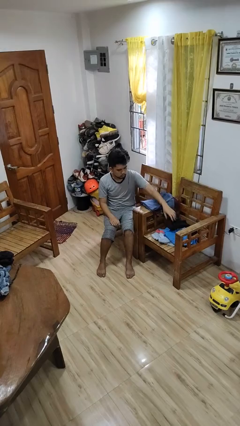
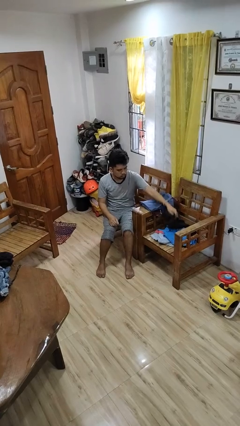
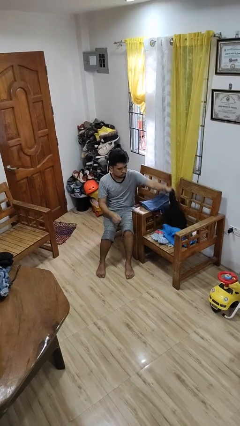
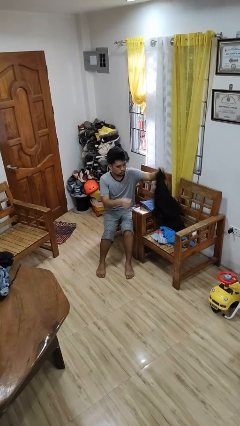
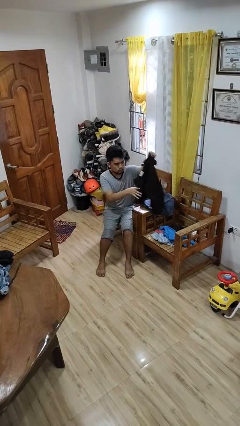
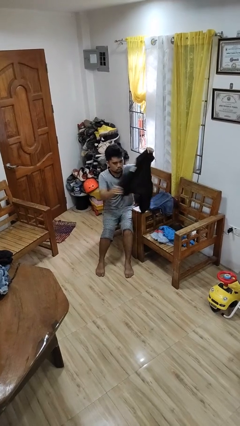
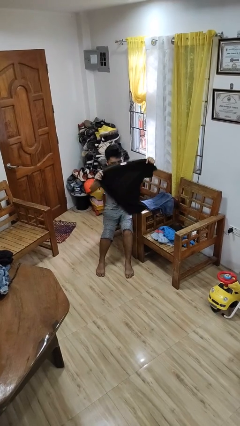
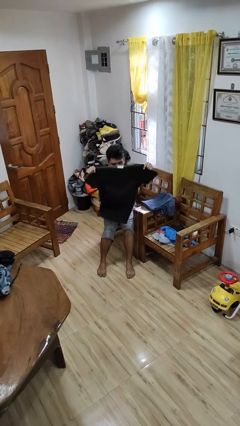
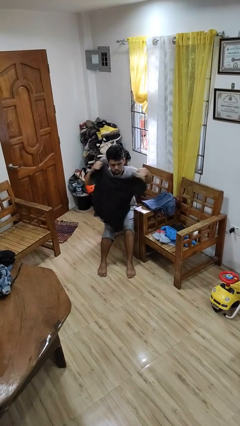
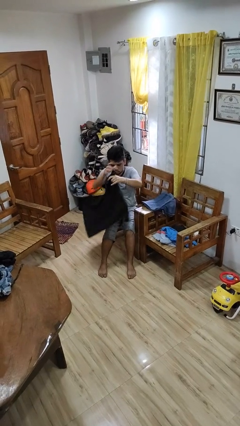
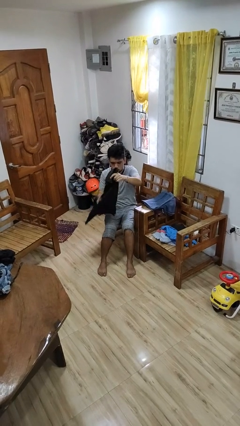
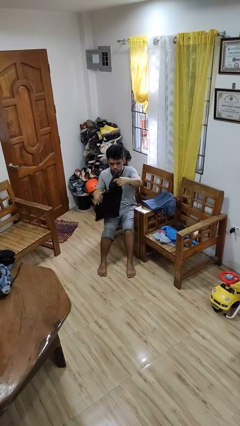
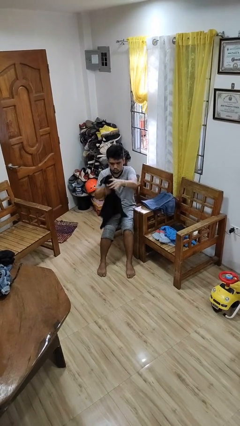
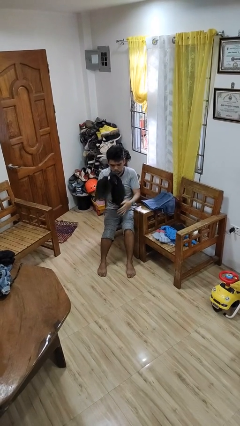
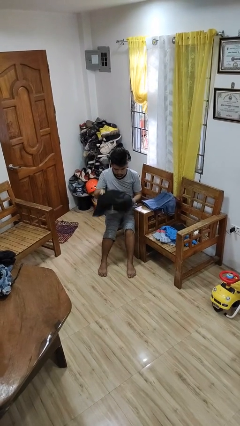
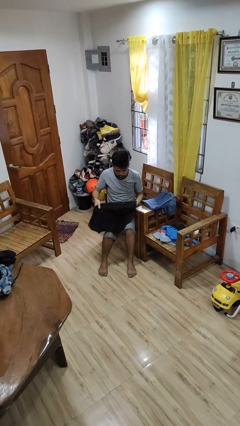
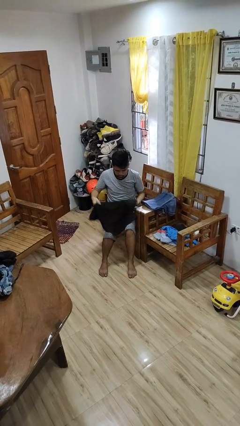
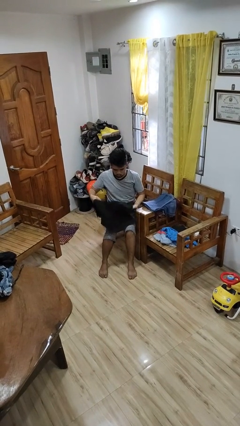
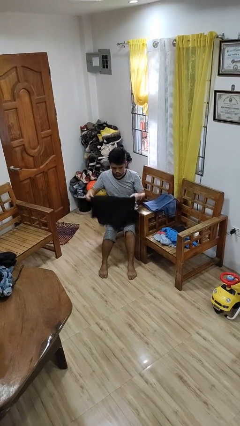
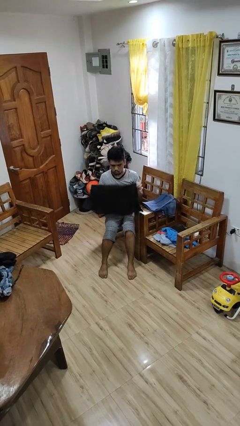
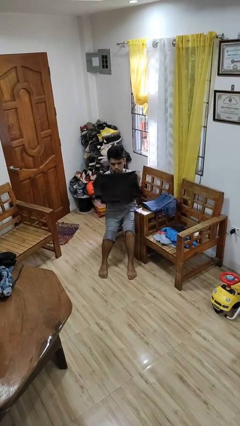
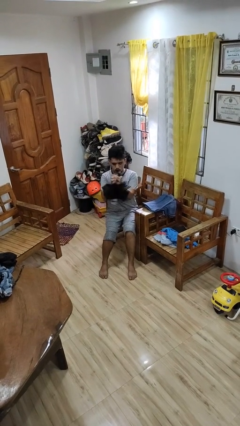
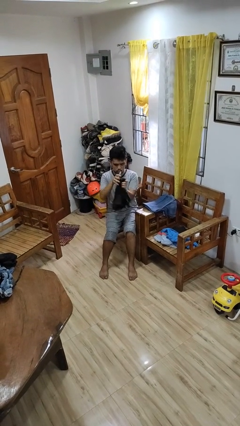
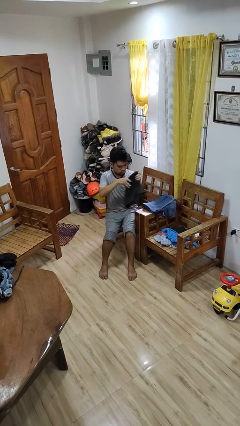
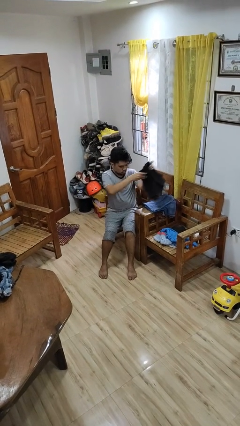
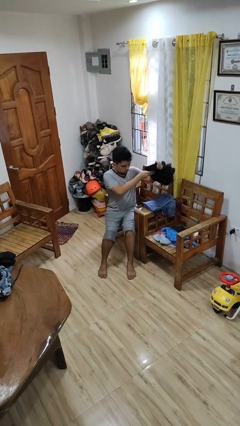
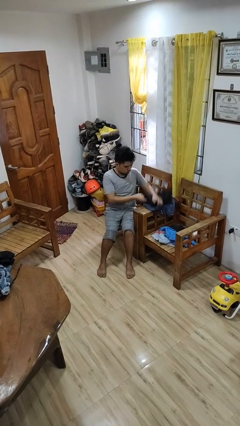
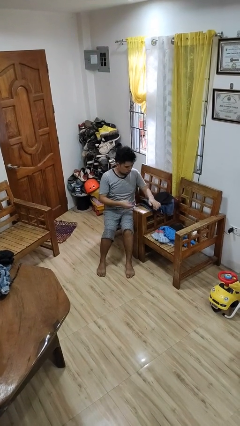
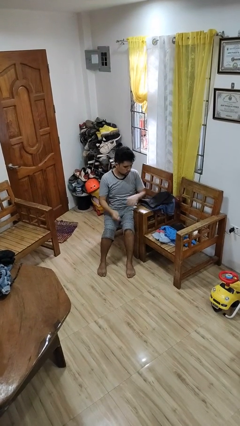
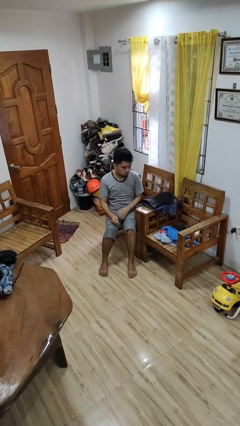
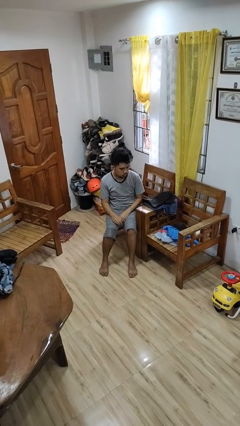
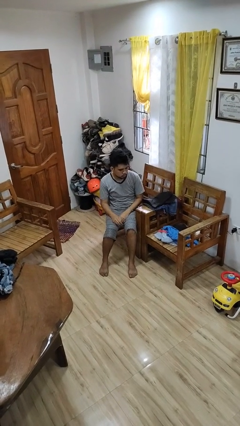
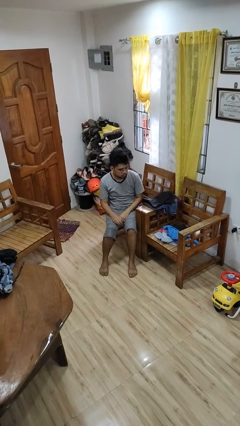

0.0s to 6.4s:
person folds shirt

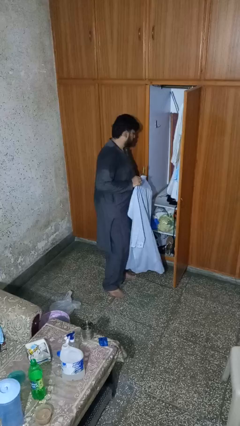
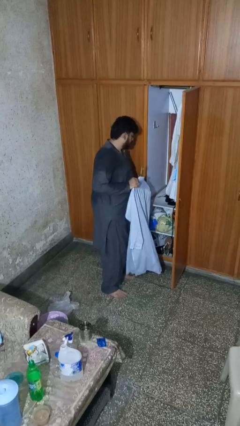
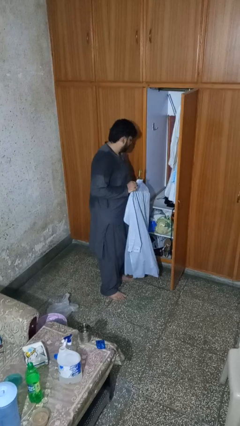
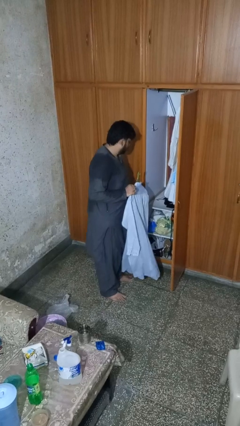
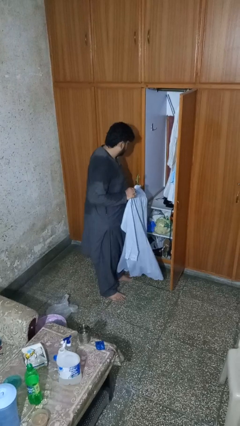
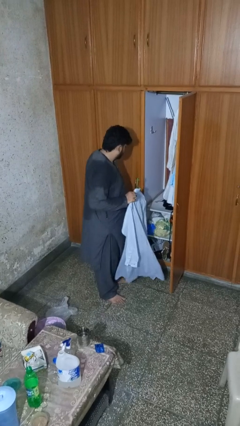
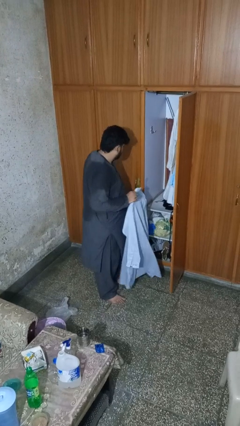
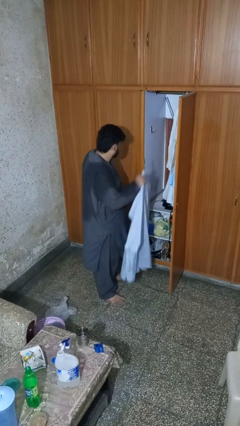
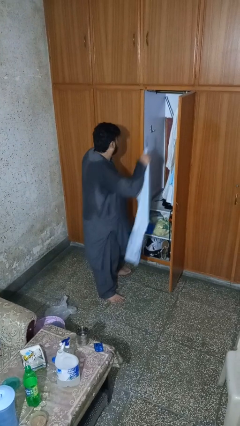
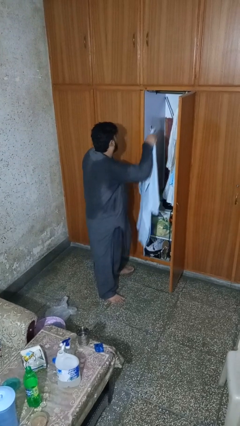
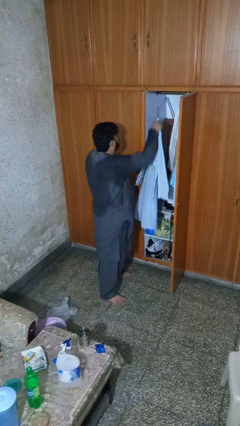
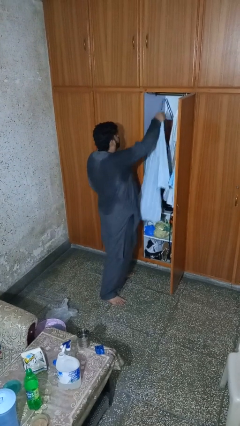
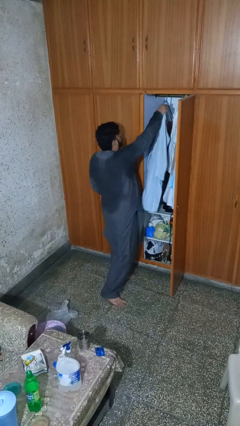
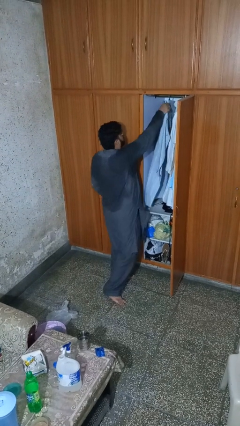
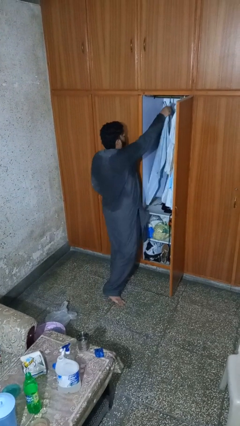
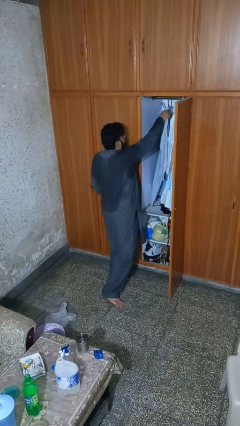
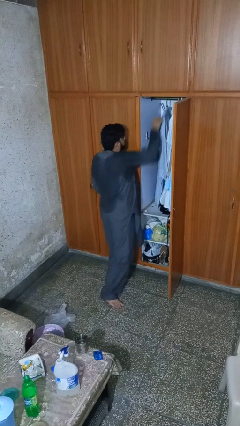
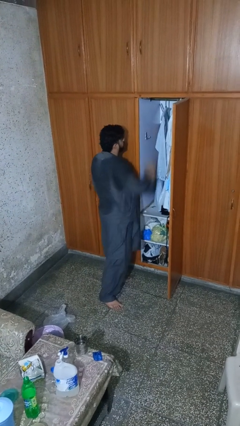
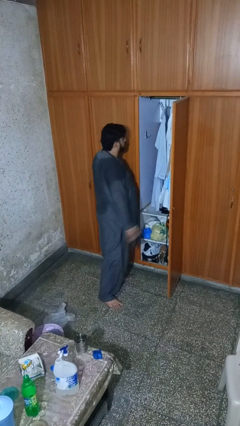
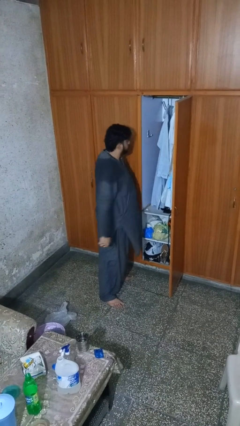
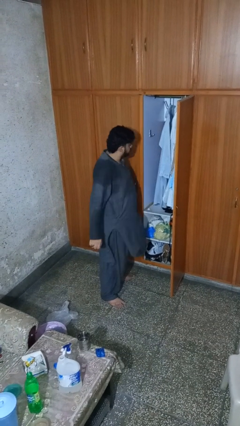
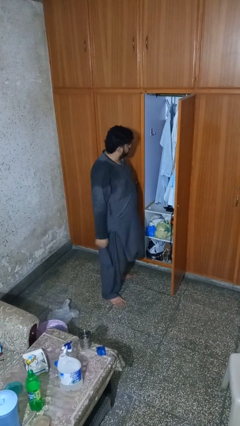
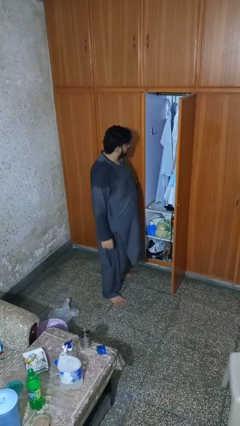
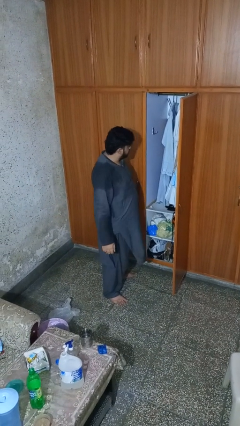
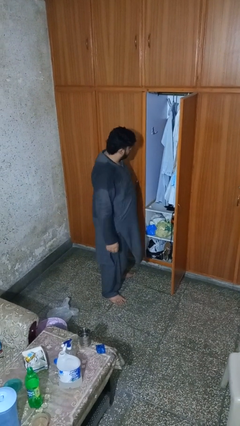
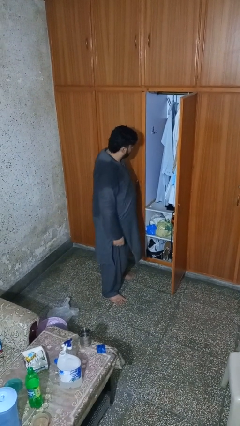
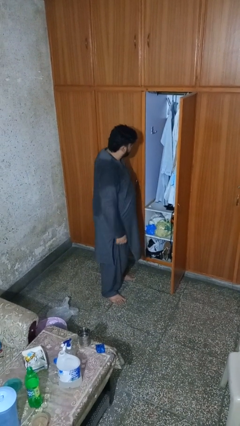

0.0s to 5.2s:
person puts clothes into closet

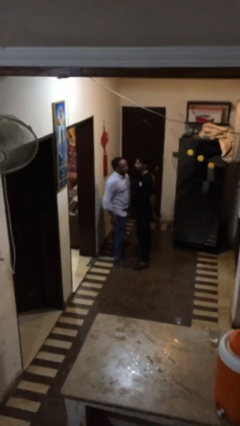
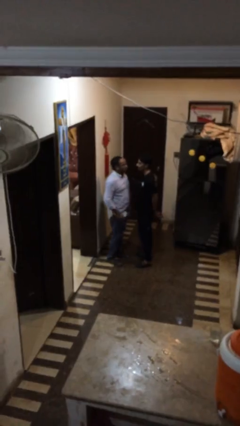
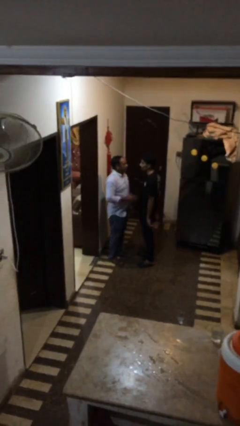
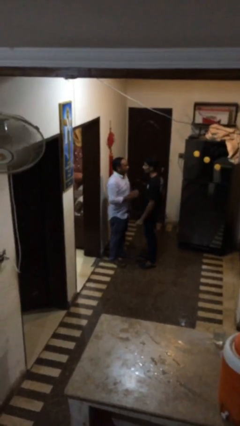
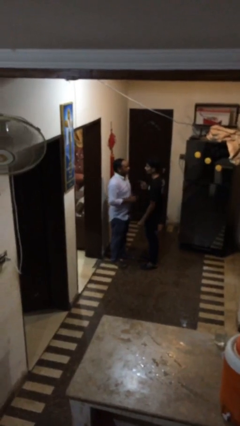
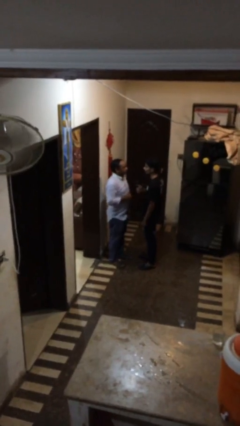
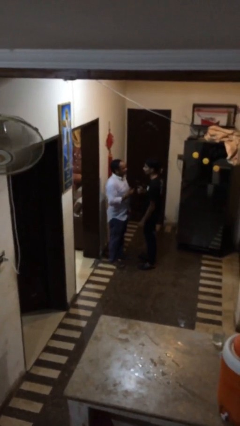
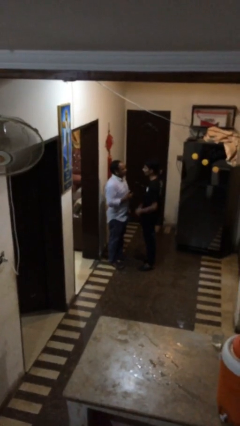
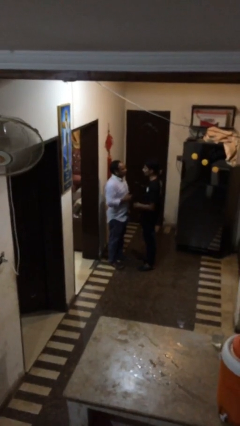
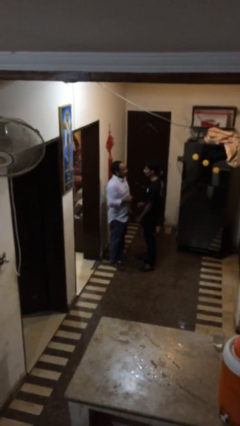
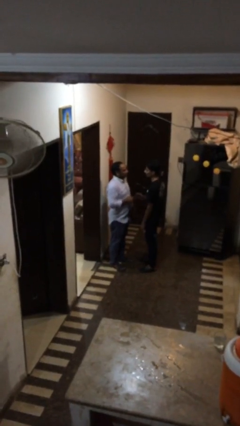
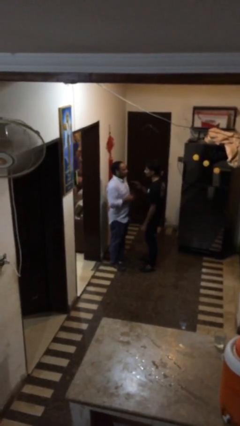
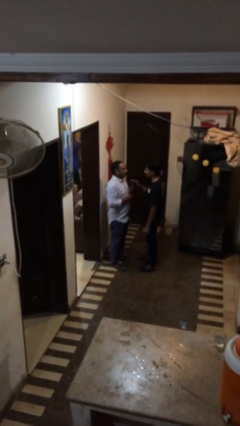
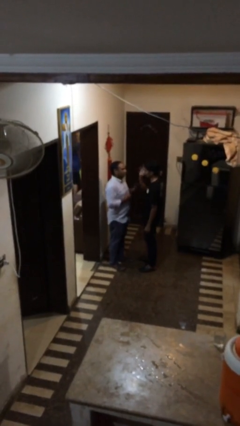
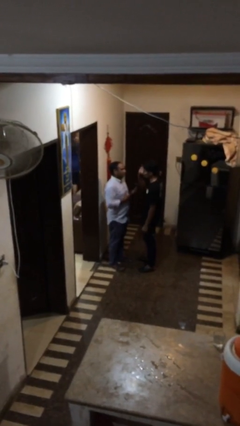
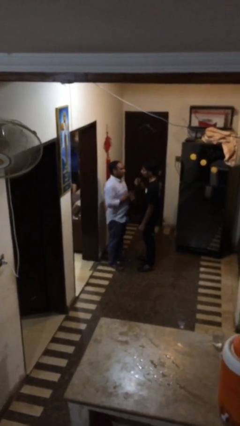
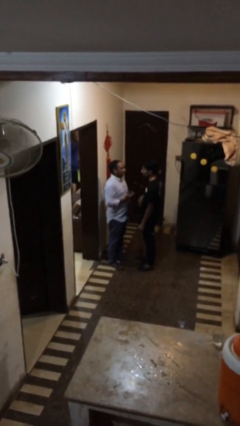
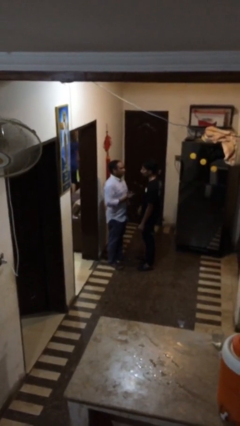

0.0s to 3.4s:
person talks to person

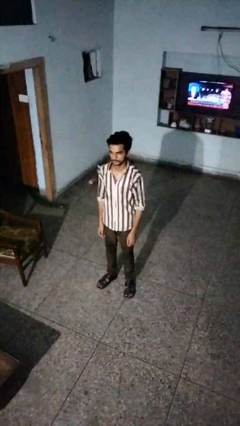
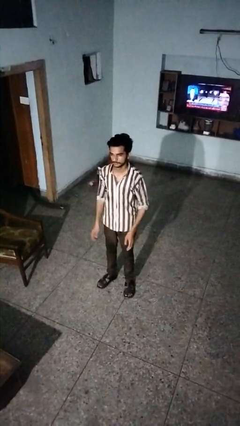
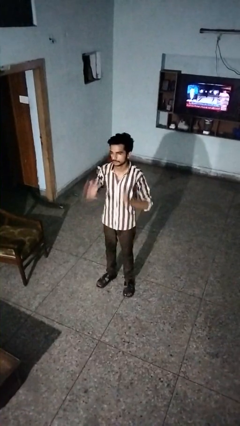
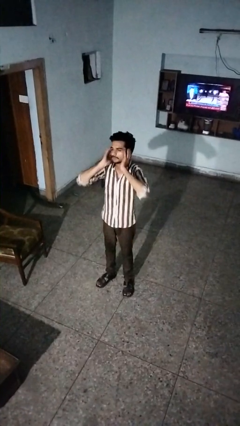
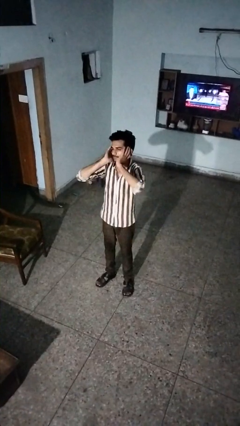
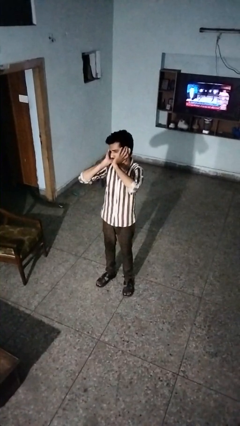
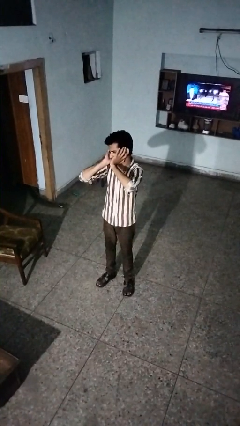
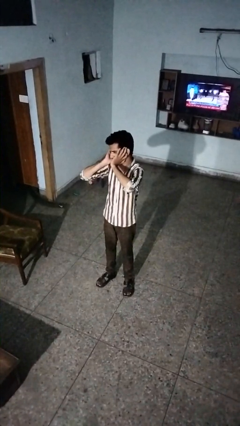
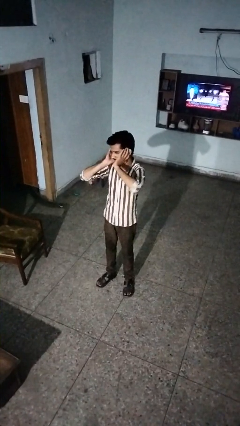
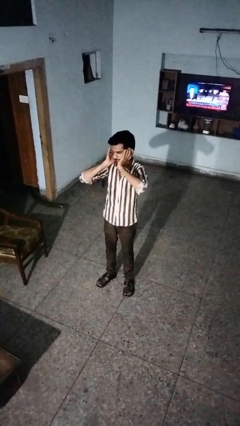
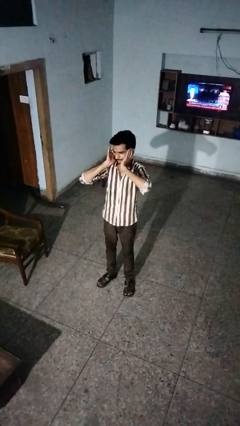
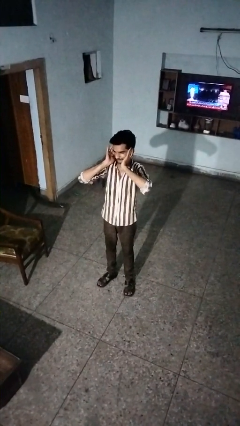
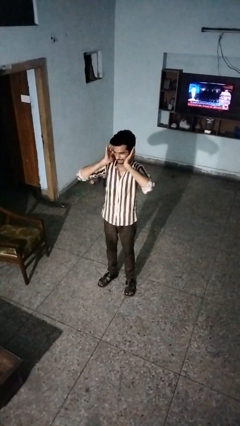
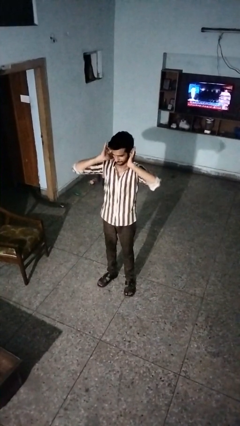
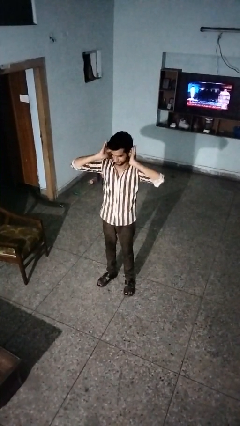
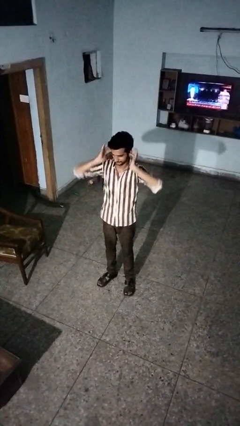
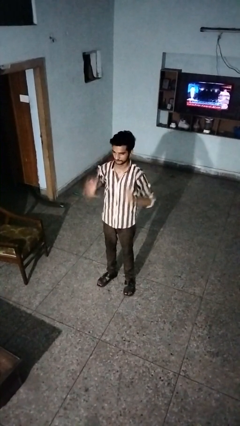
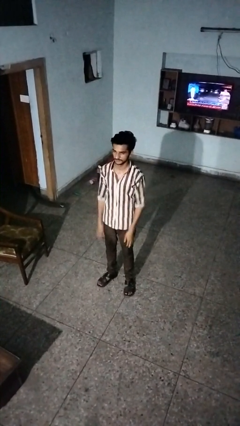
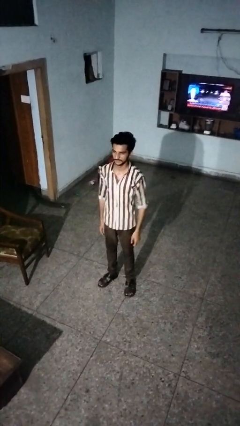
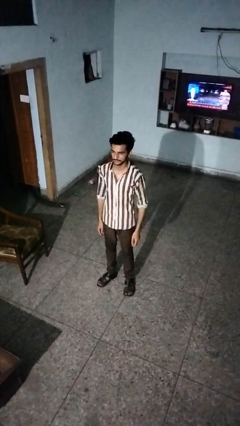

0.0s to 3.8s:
person puts fingers in ear
